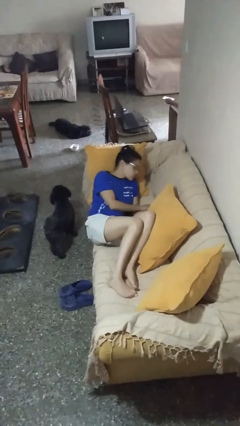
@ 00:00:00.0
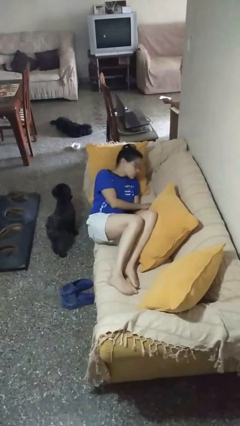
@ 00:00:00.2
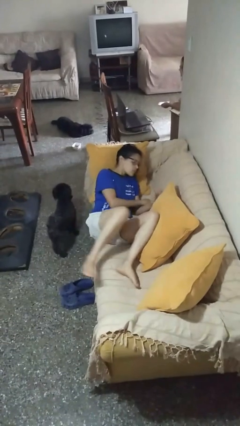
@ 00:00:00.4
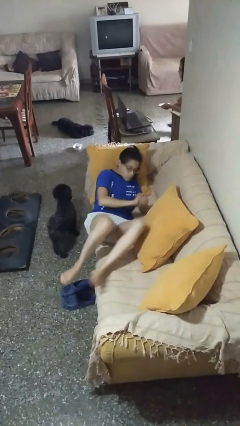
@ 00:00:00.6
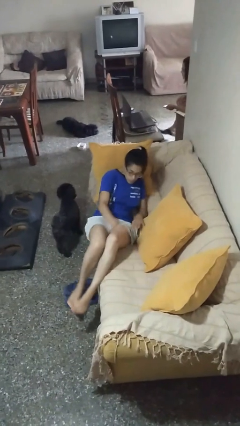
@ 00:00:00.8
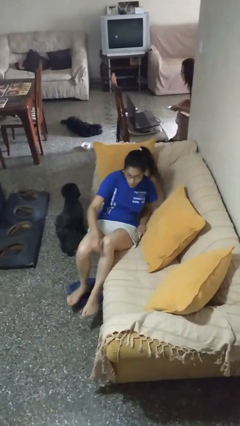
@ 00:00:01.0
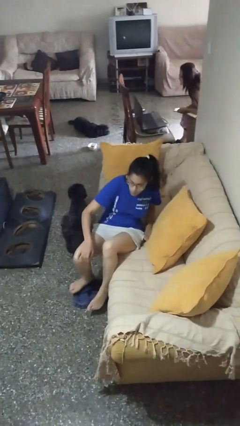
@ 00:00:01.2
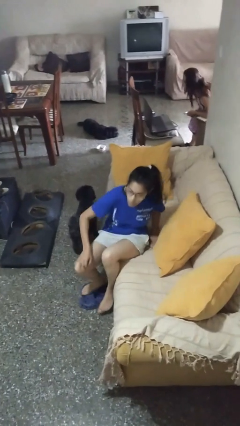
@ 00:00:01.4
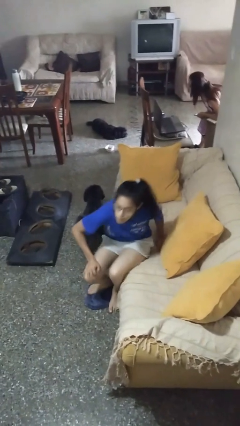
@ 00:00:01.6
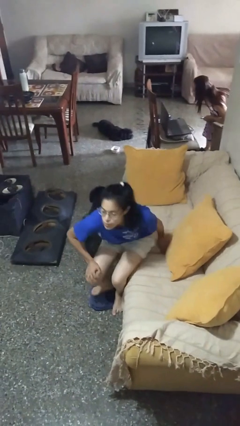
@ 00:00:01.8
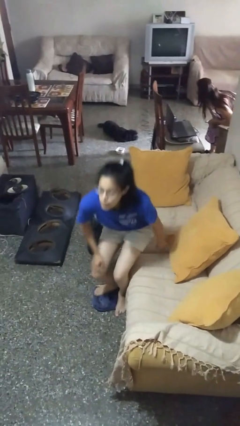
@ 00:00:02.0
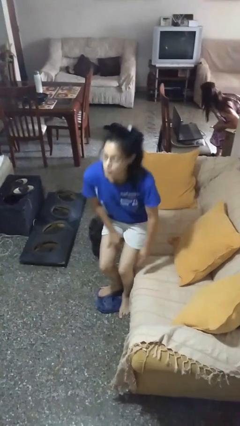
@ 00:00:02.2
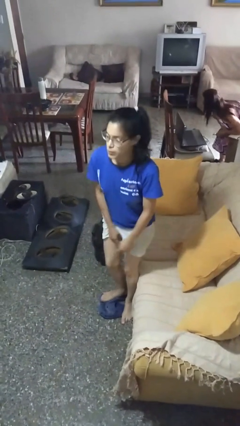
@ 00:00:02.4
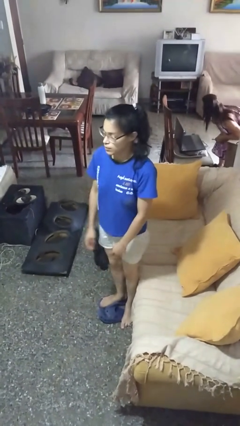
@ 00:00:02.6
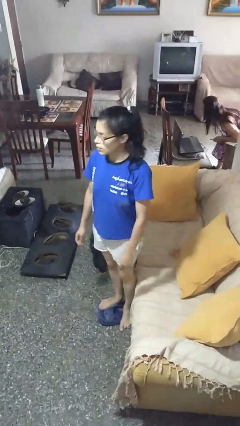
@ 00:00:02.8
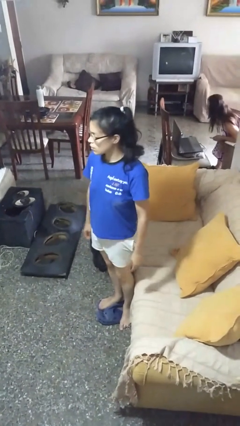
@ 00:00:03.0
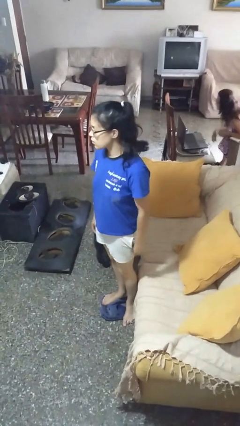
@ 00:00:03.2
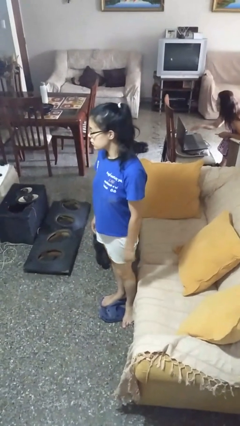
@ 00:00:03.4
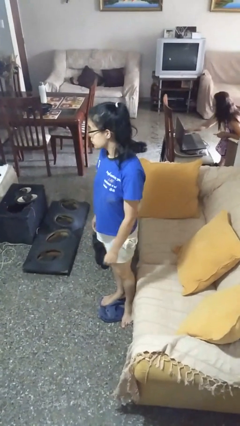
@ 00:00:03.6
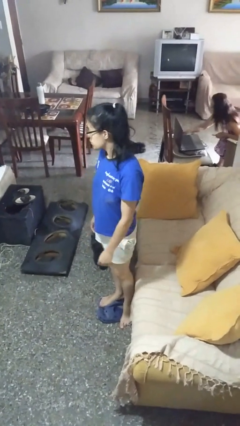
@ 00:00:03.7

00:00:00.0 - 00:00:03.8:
person stands up

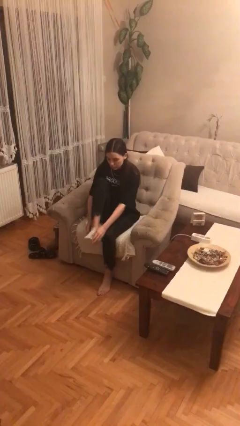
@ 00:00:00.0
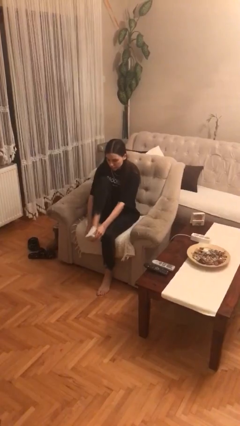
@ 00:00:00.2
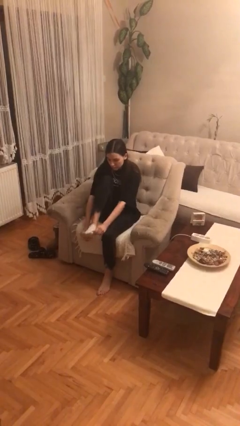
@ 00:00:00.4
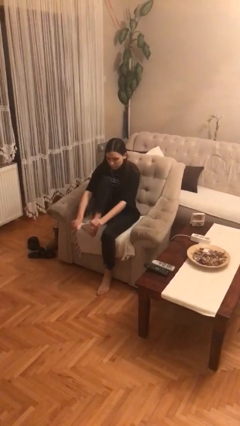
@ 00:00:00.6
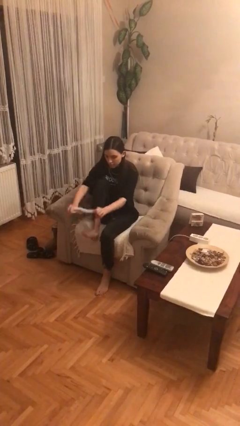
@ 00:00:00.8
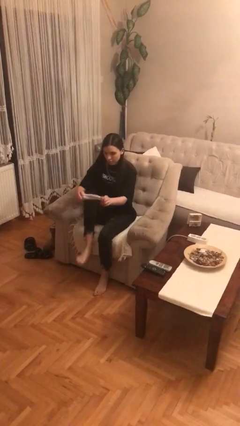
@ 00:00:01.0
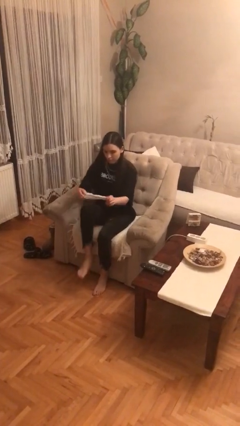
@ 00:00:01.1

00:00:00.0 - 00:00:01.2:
person takes off socks

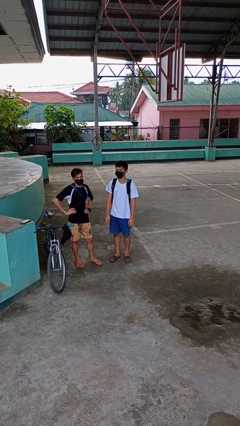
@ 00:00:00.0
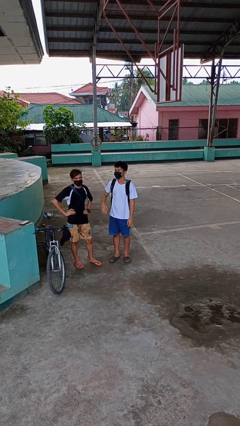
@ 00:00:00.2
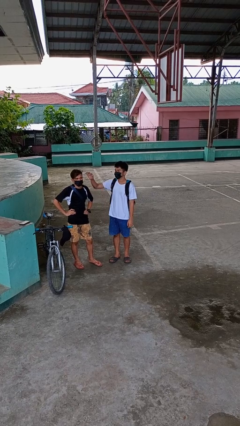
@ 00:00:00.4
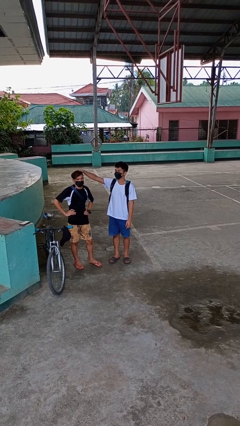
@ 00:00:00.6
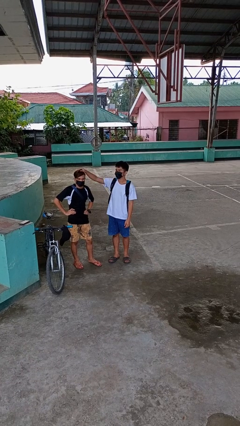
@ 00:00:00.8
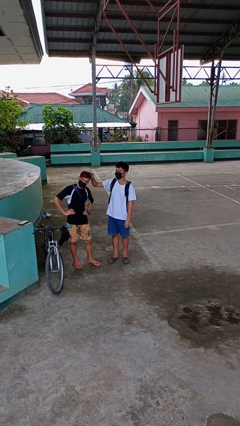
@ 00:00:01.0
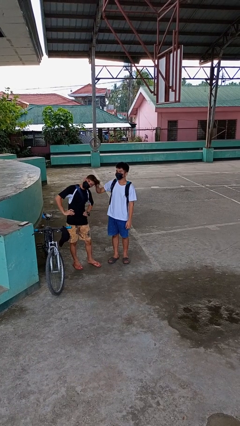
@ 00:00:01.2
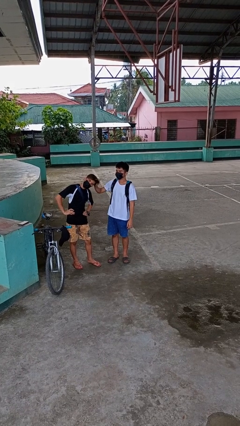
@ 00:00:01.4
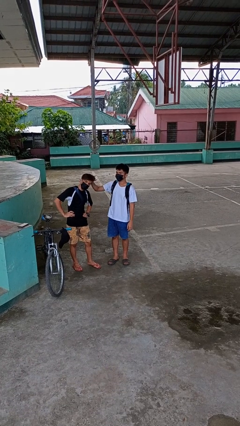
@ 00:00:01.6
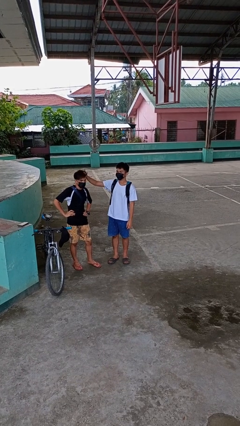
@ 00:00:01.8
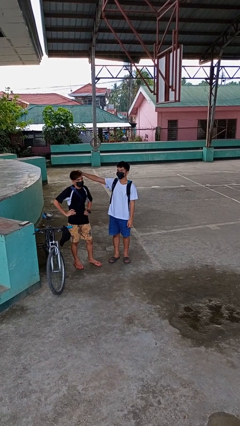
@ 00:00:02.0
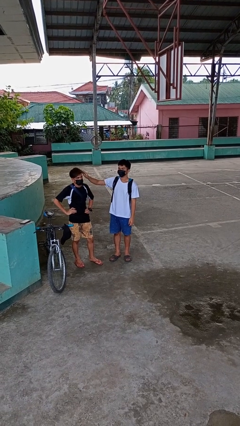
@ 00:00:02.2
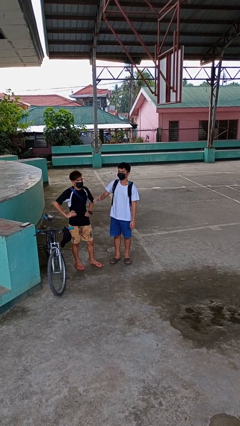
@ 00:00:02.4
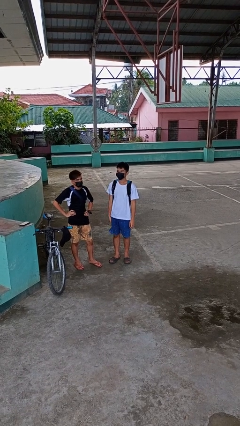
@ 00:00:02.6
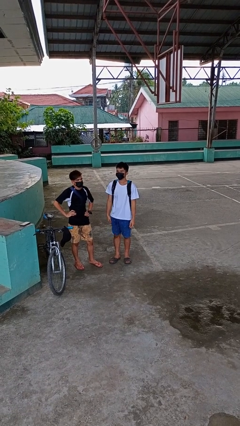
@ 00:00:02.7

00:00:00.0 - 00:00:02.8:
person grabs person by hair

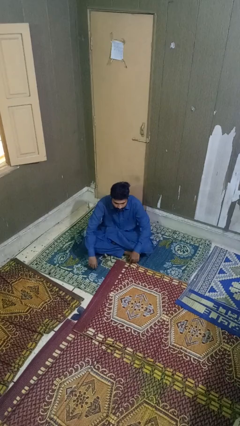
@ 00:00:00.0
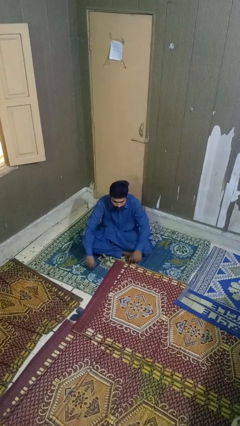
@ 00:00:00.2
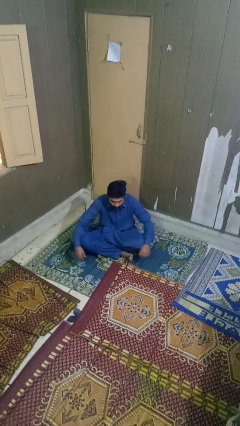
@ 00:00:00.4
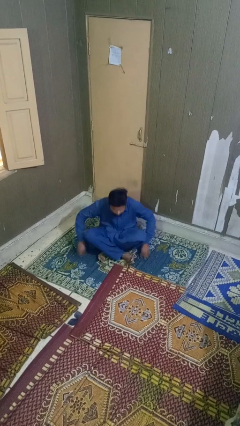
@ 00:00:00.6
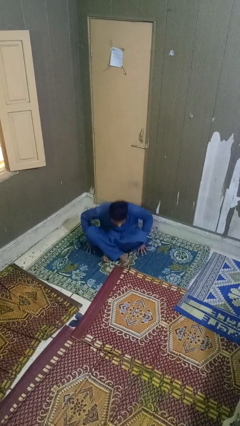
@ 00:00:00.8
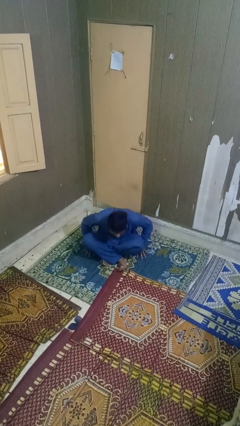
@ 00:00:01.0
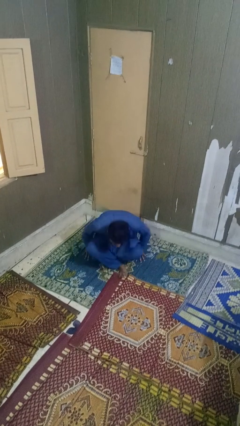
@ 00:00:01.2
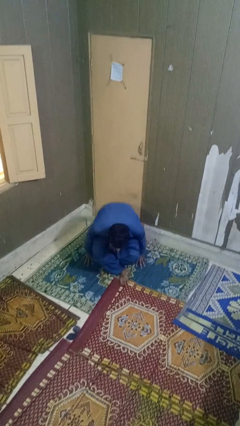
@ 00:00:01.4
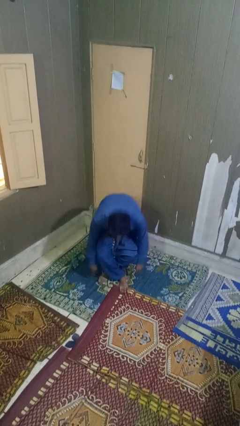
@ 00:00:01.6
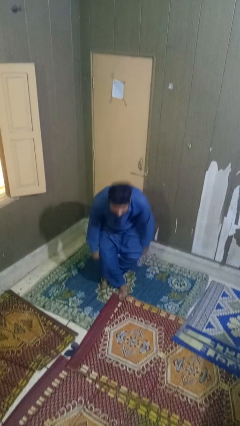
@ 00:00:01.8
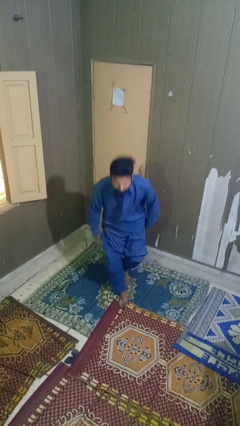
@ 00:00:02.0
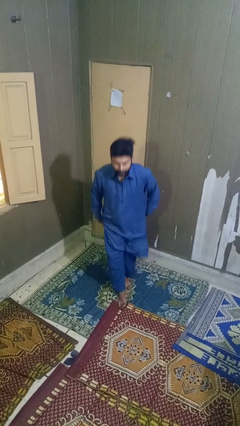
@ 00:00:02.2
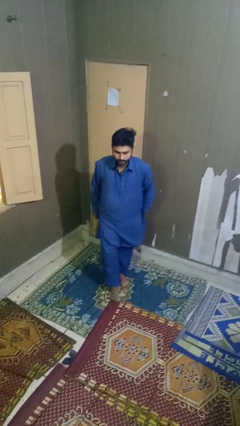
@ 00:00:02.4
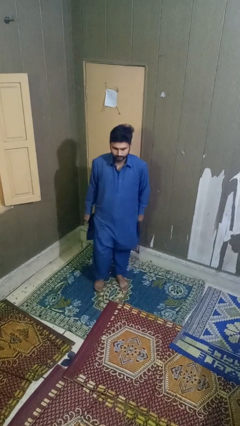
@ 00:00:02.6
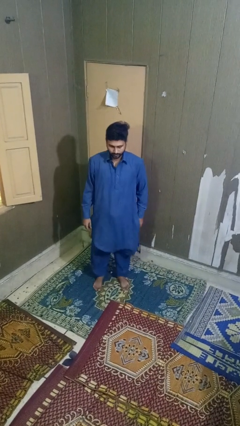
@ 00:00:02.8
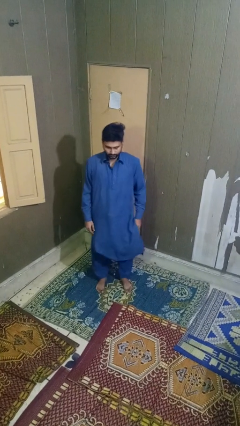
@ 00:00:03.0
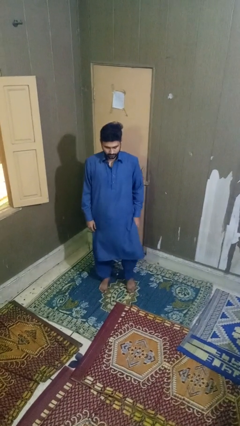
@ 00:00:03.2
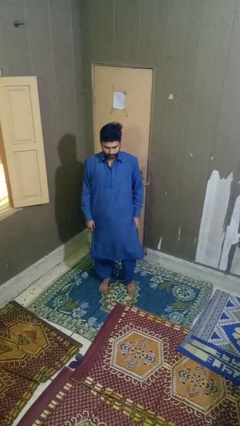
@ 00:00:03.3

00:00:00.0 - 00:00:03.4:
person stands up from floor

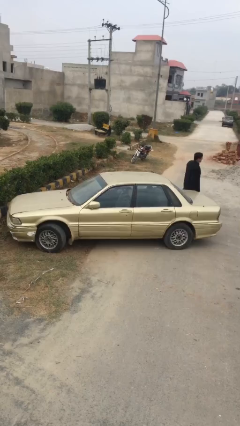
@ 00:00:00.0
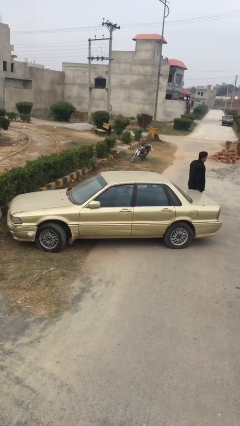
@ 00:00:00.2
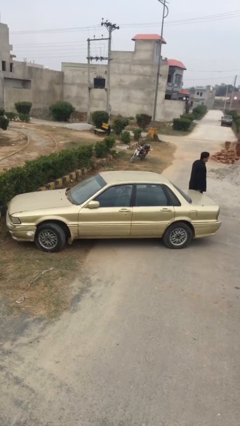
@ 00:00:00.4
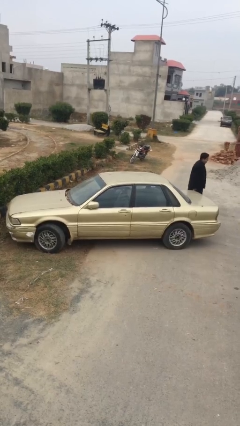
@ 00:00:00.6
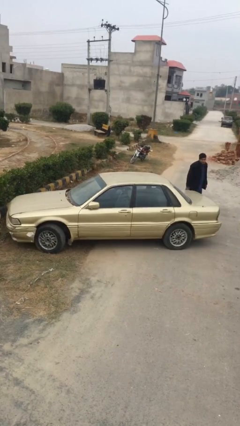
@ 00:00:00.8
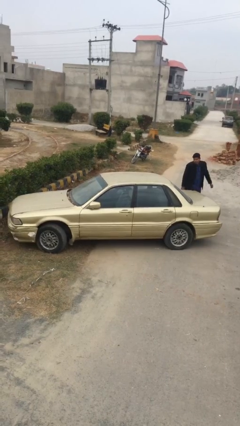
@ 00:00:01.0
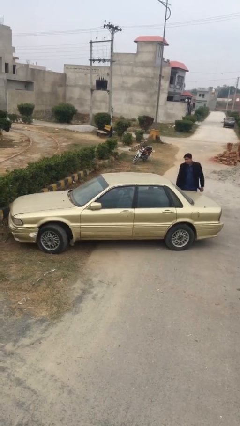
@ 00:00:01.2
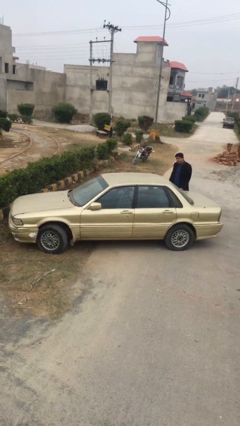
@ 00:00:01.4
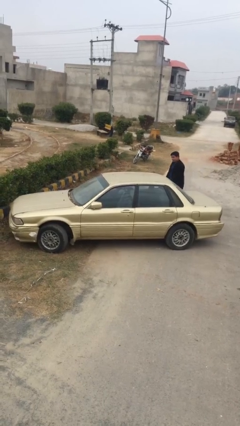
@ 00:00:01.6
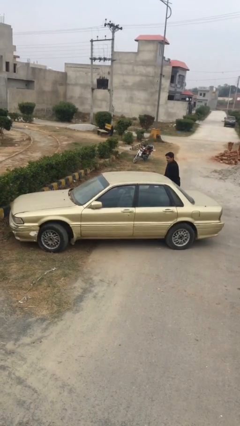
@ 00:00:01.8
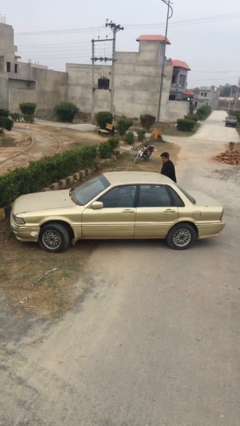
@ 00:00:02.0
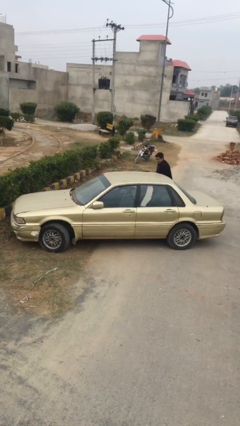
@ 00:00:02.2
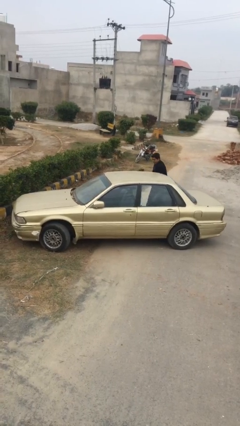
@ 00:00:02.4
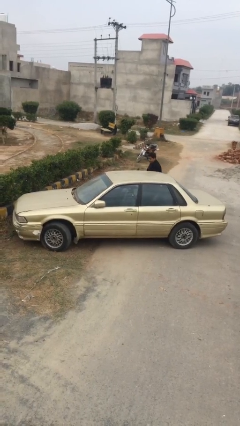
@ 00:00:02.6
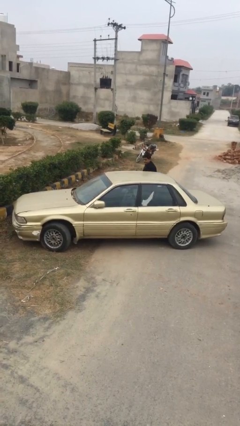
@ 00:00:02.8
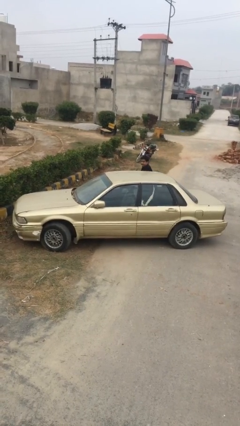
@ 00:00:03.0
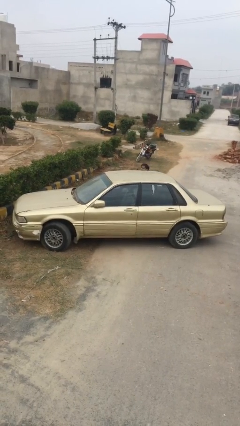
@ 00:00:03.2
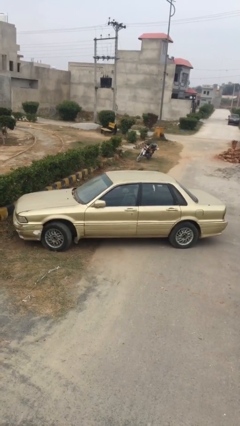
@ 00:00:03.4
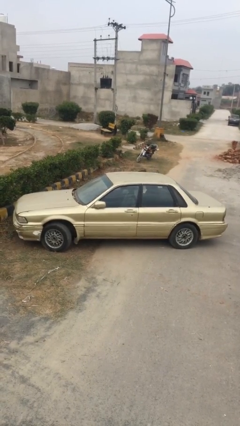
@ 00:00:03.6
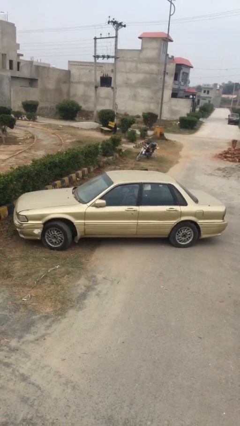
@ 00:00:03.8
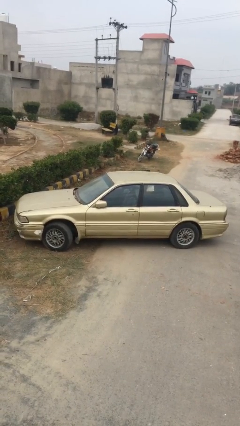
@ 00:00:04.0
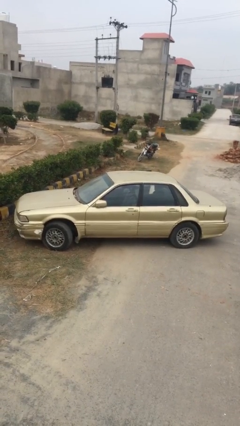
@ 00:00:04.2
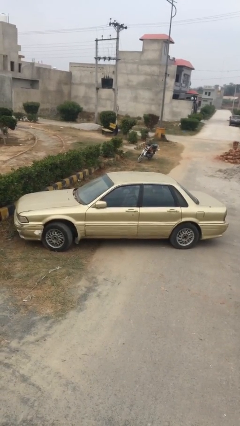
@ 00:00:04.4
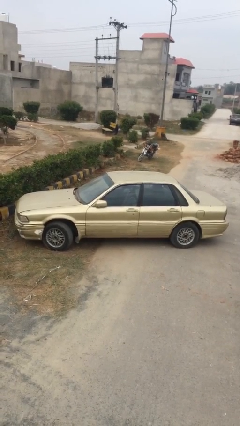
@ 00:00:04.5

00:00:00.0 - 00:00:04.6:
car picks up person

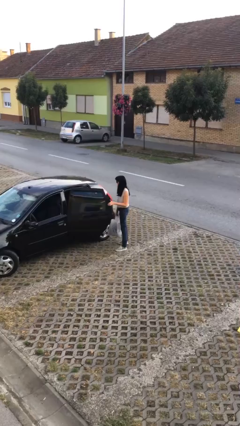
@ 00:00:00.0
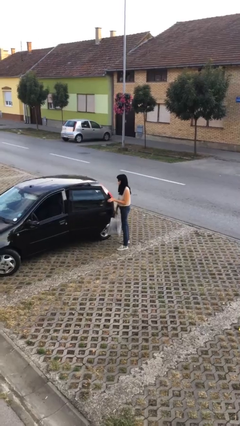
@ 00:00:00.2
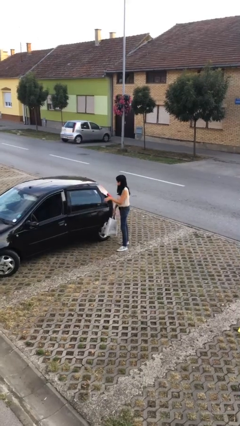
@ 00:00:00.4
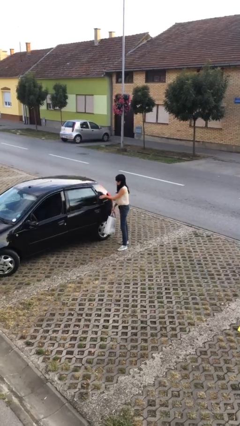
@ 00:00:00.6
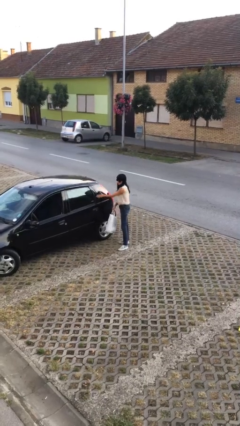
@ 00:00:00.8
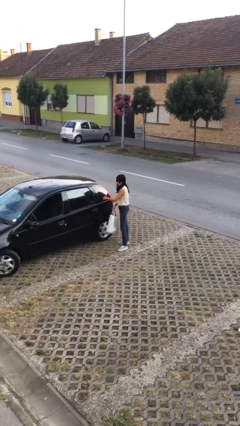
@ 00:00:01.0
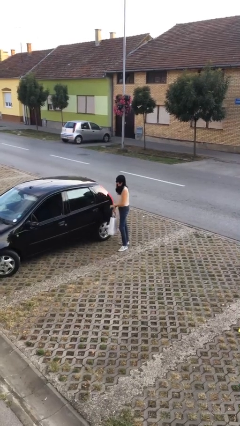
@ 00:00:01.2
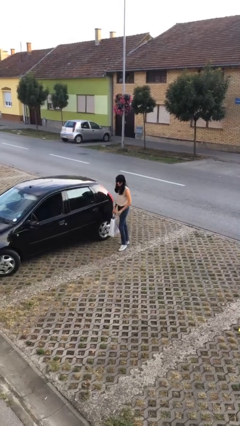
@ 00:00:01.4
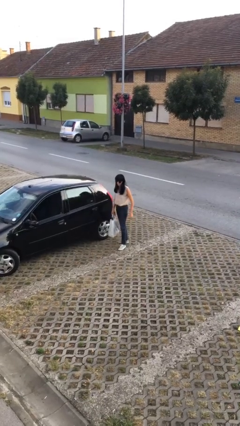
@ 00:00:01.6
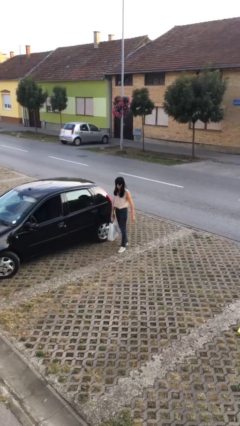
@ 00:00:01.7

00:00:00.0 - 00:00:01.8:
person closes car door
